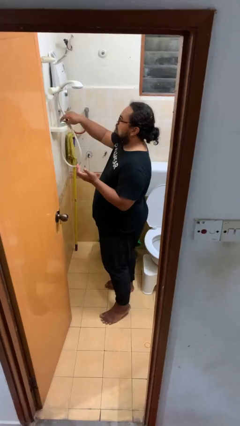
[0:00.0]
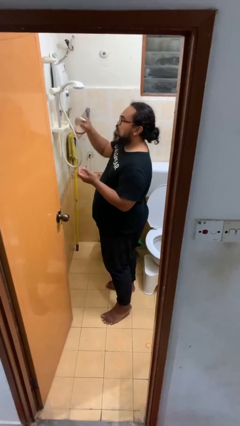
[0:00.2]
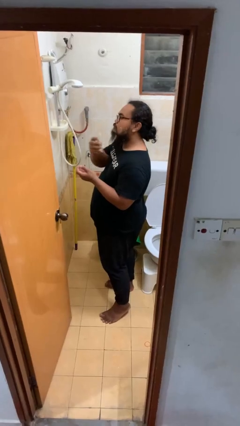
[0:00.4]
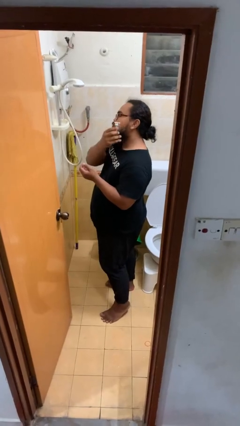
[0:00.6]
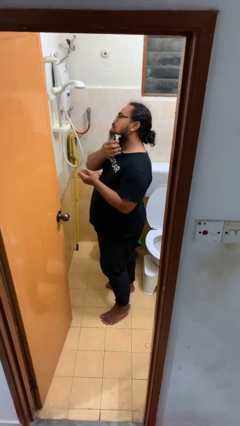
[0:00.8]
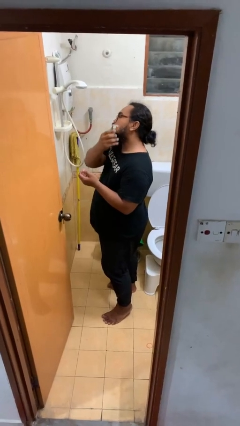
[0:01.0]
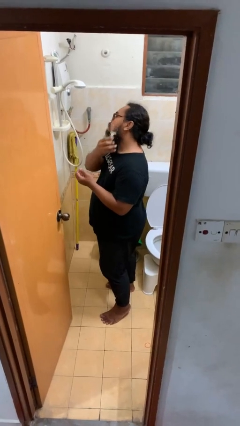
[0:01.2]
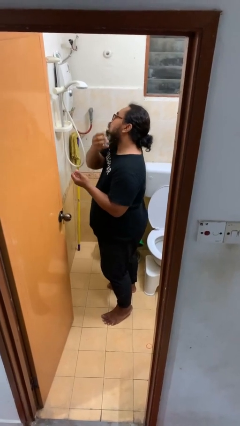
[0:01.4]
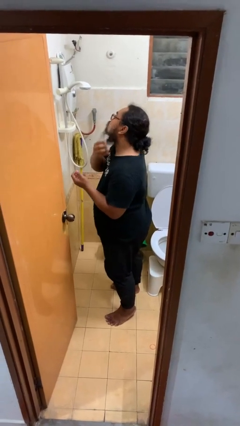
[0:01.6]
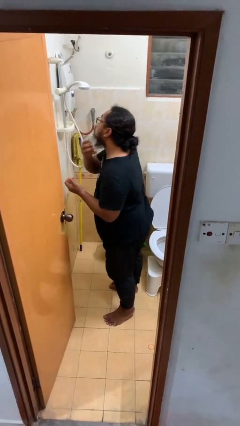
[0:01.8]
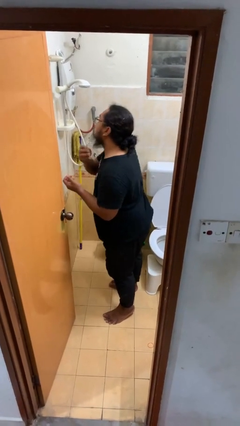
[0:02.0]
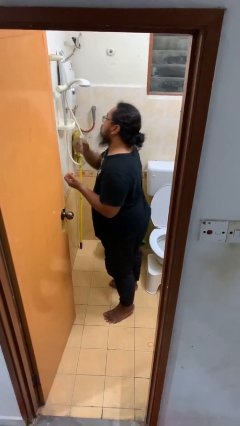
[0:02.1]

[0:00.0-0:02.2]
person shaves face

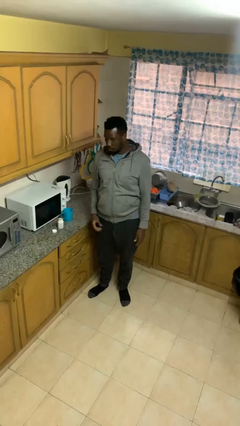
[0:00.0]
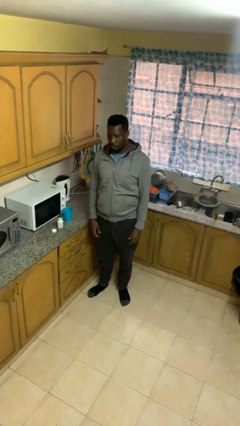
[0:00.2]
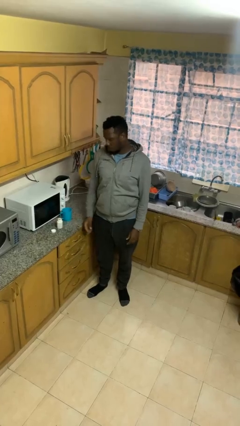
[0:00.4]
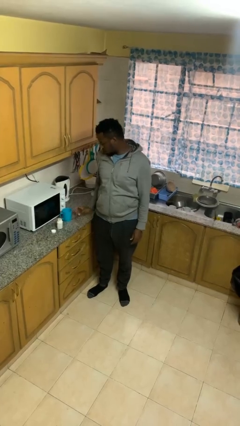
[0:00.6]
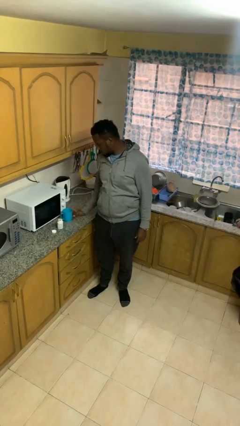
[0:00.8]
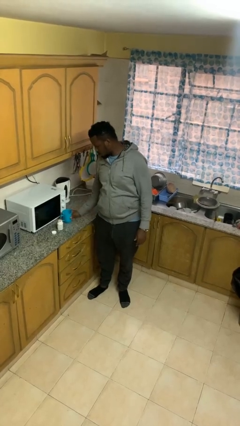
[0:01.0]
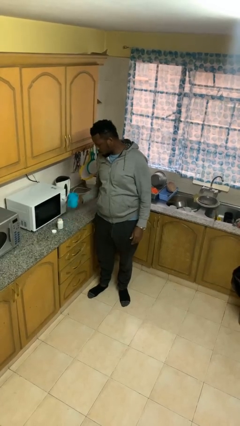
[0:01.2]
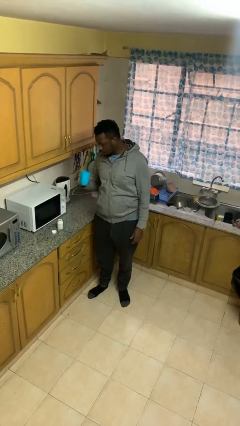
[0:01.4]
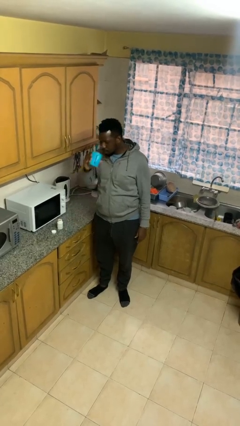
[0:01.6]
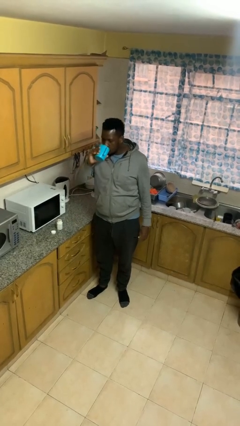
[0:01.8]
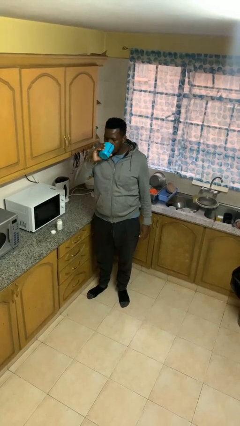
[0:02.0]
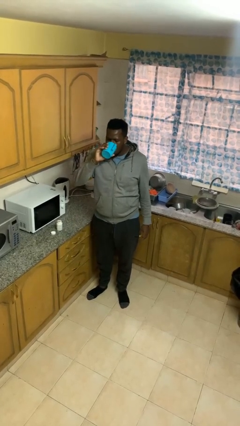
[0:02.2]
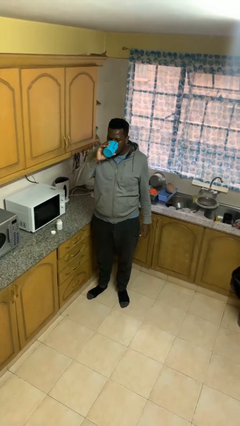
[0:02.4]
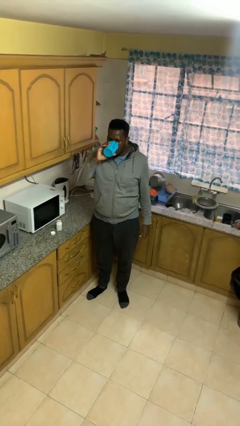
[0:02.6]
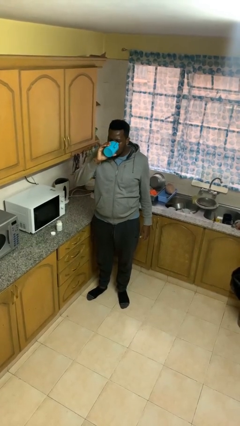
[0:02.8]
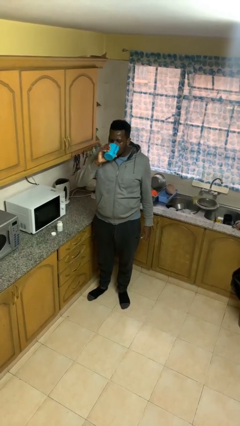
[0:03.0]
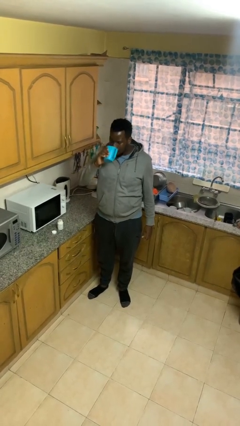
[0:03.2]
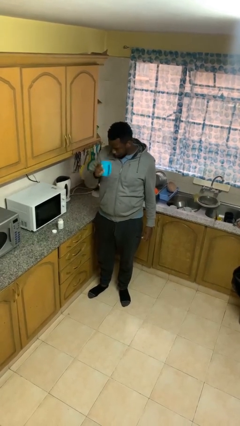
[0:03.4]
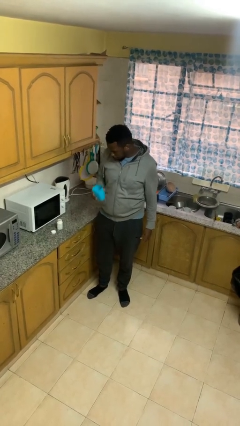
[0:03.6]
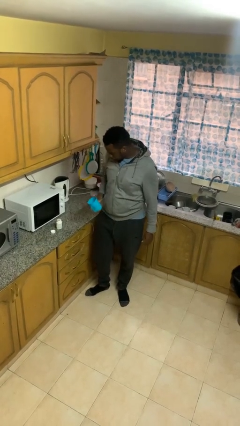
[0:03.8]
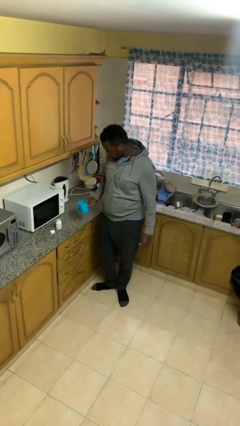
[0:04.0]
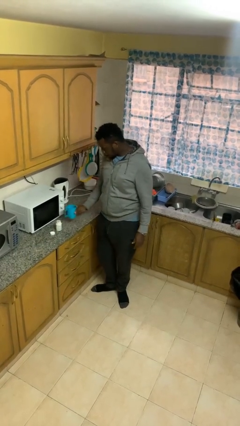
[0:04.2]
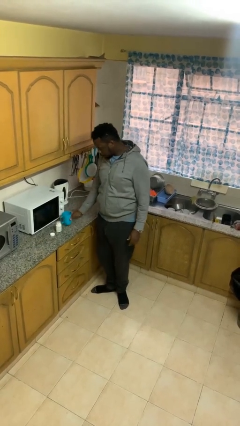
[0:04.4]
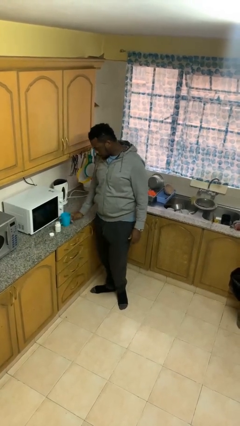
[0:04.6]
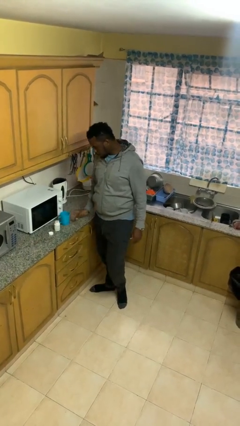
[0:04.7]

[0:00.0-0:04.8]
person drinks from cup

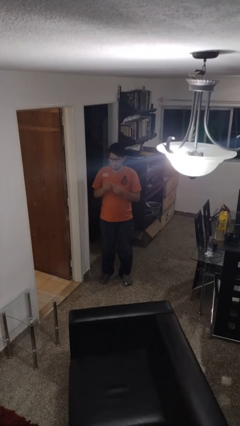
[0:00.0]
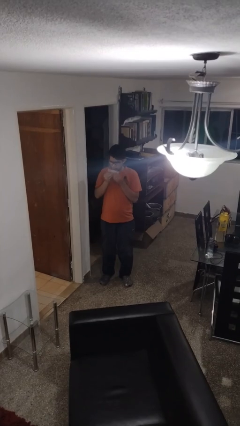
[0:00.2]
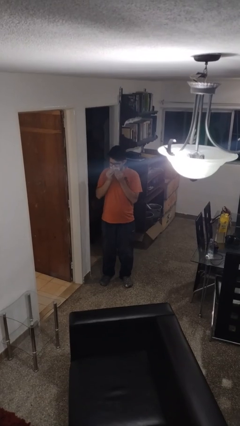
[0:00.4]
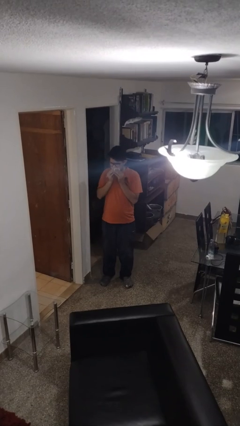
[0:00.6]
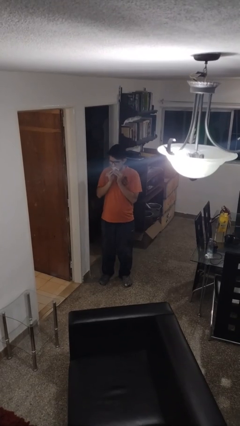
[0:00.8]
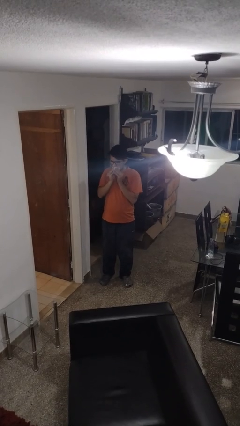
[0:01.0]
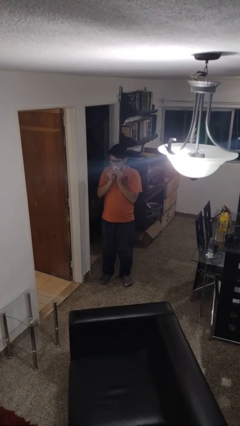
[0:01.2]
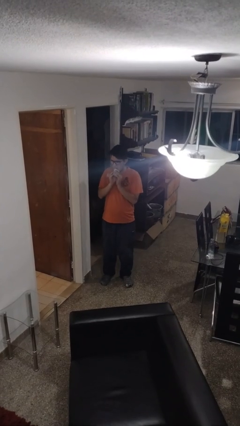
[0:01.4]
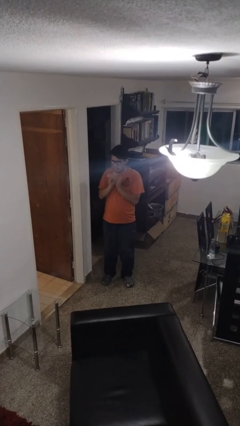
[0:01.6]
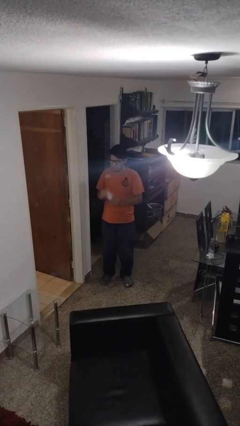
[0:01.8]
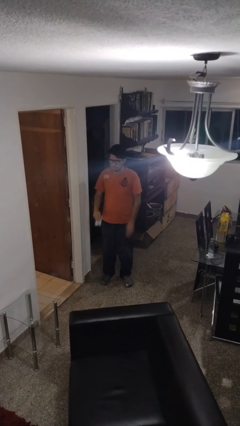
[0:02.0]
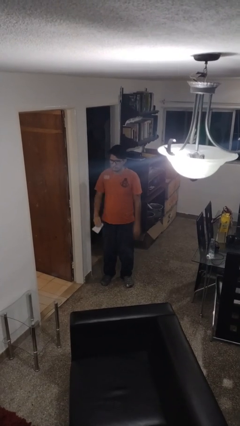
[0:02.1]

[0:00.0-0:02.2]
person wipes mouth with napkin

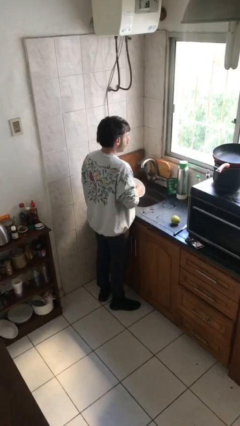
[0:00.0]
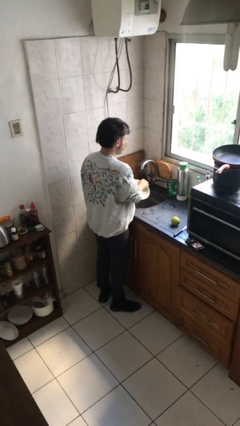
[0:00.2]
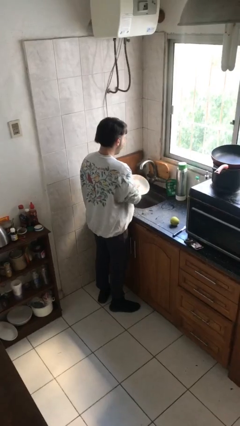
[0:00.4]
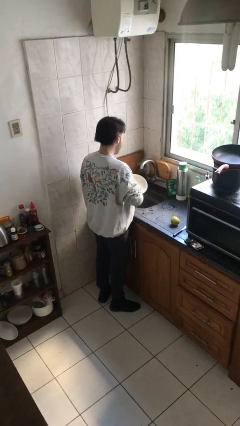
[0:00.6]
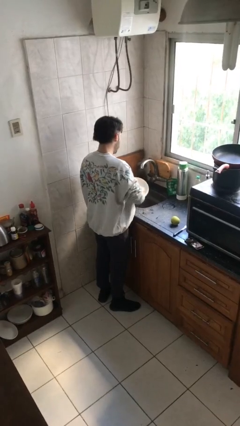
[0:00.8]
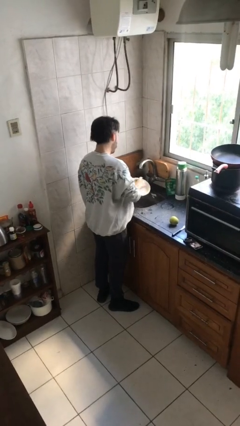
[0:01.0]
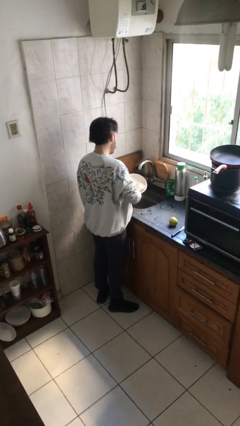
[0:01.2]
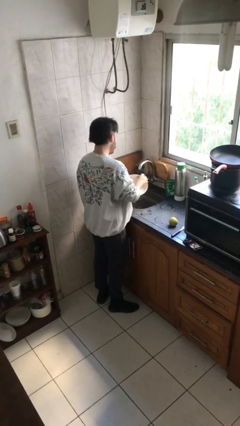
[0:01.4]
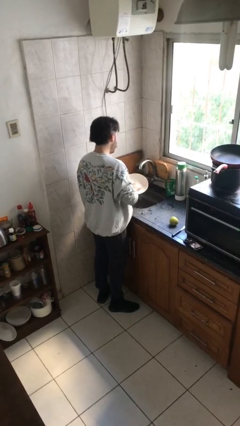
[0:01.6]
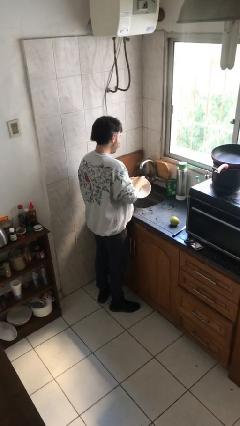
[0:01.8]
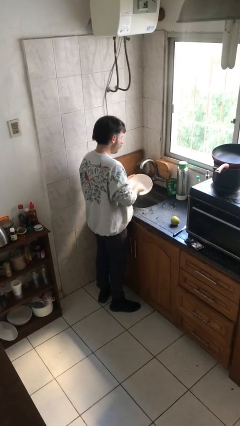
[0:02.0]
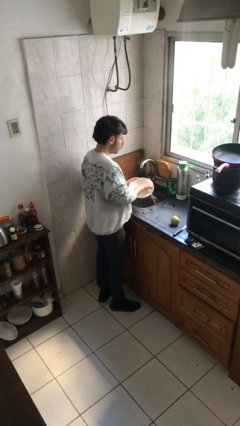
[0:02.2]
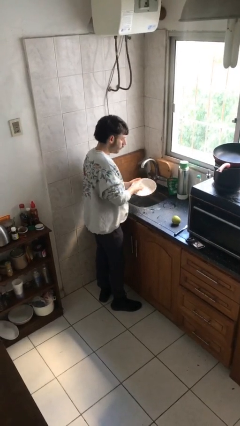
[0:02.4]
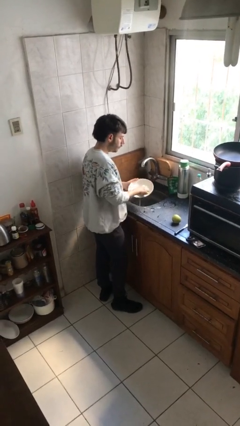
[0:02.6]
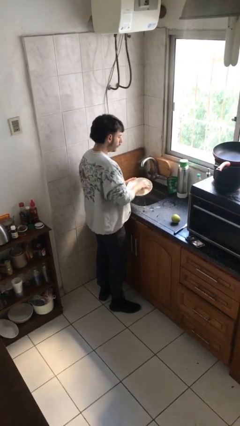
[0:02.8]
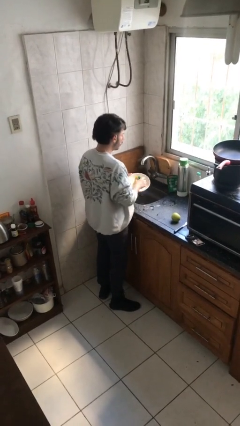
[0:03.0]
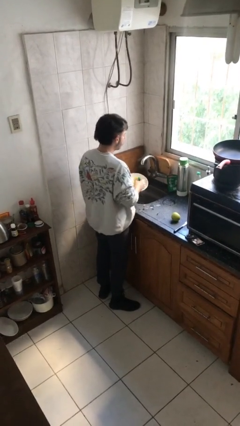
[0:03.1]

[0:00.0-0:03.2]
person washes dish

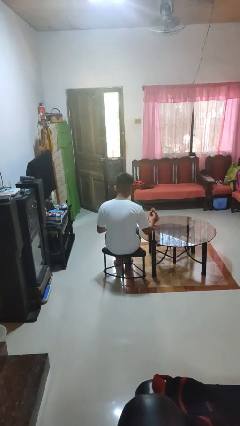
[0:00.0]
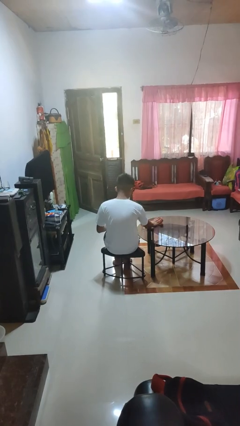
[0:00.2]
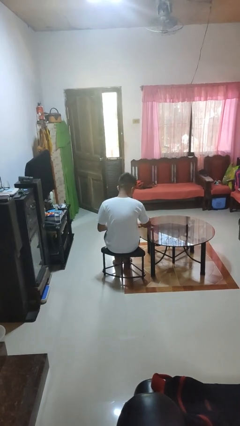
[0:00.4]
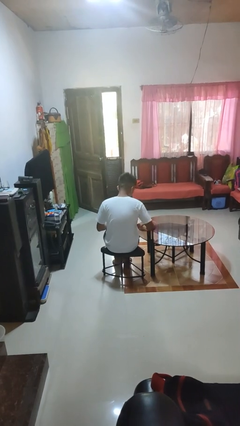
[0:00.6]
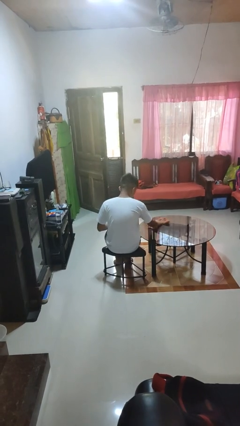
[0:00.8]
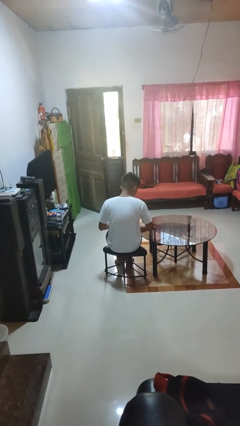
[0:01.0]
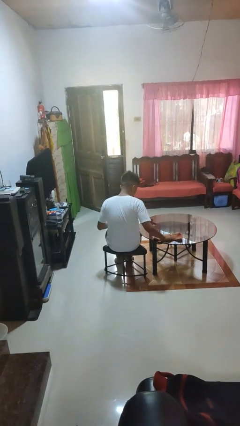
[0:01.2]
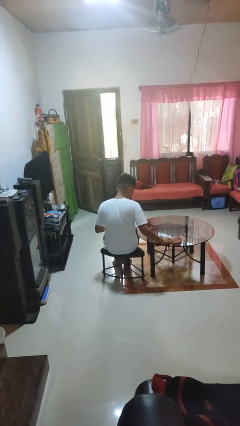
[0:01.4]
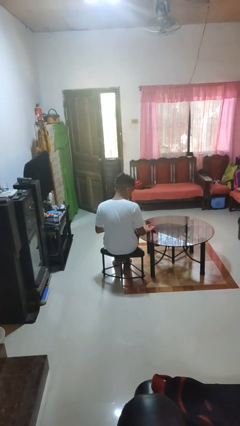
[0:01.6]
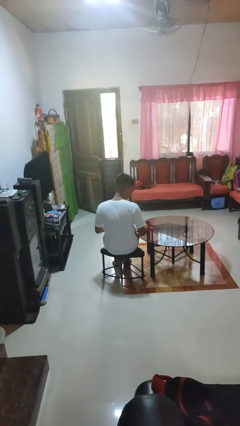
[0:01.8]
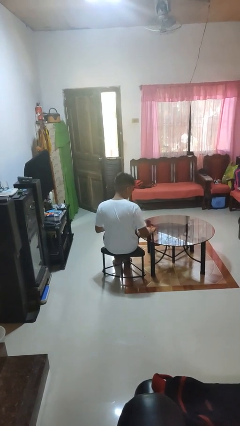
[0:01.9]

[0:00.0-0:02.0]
person cleans table with rag

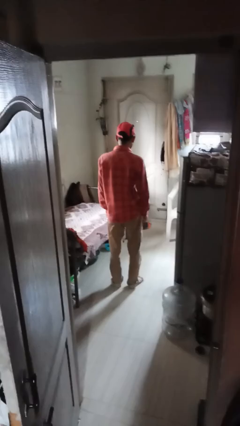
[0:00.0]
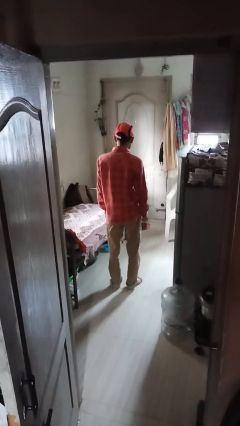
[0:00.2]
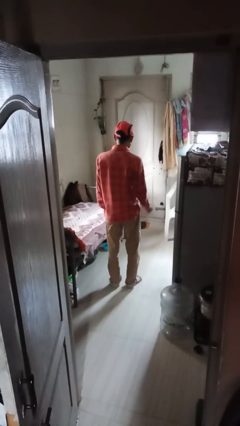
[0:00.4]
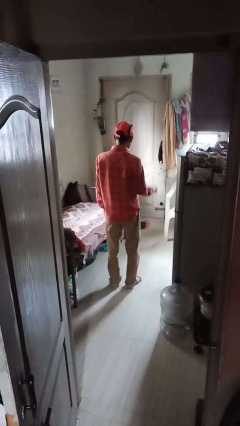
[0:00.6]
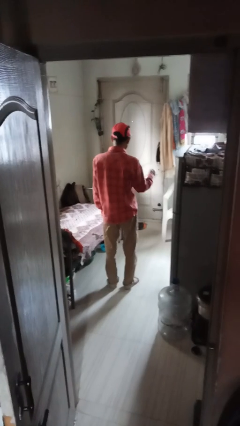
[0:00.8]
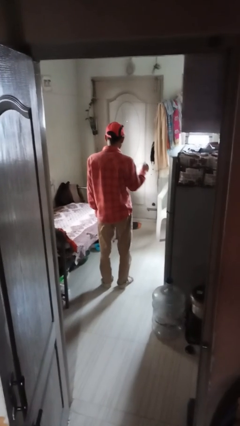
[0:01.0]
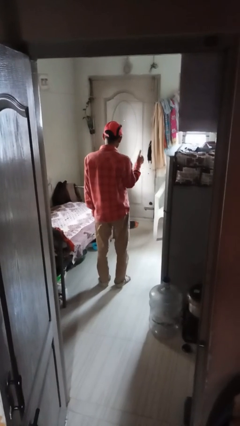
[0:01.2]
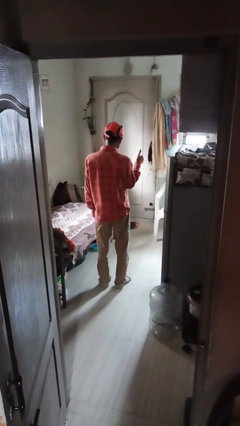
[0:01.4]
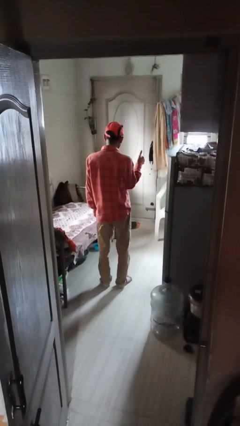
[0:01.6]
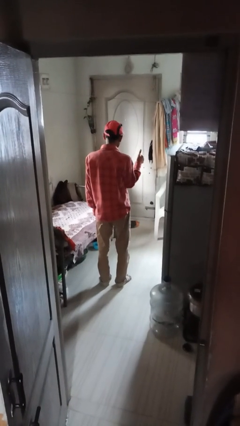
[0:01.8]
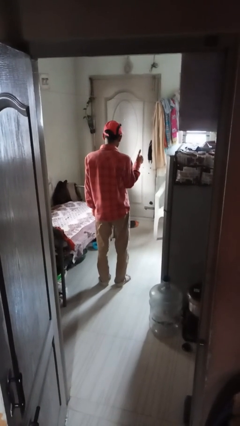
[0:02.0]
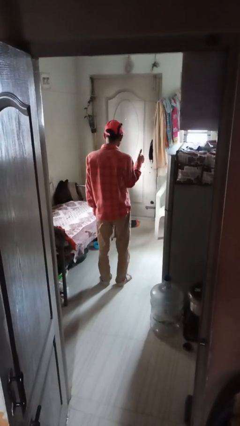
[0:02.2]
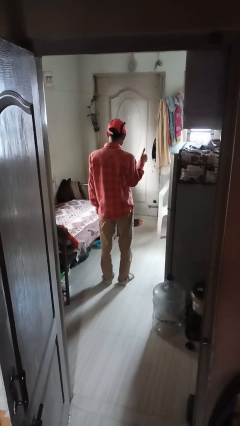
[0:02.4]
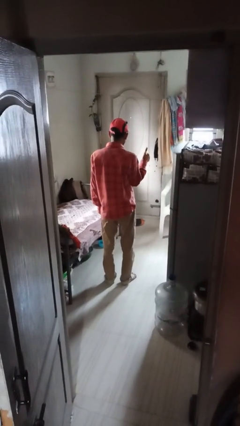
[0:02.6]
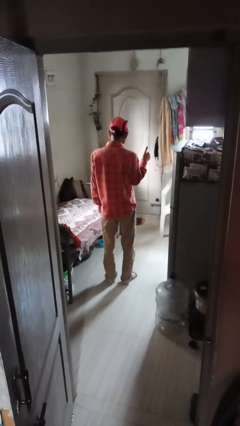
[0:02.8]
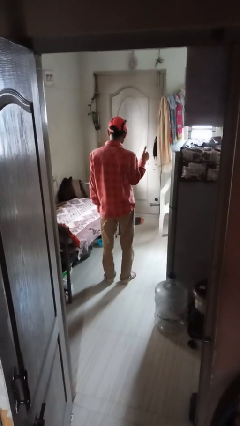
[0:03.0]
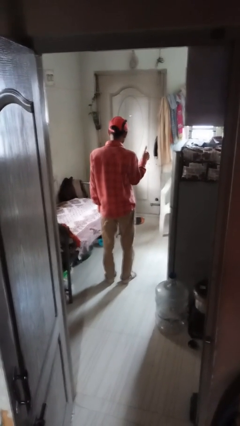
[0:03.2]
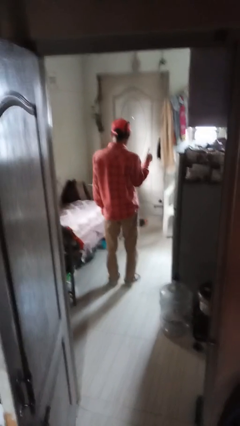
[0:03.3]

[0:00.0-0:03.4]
person gestures thumbs up
